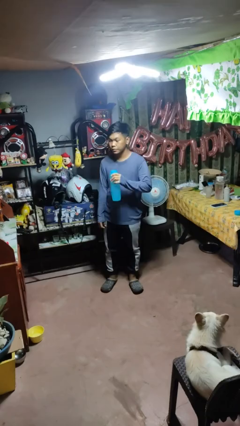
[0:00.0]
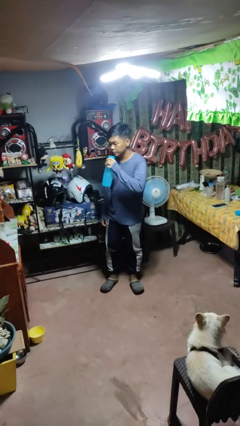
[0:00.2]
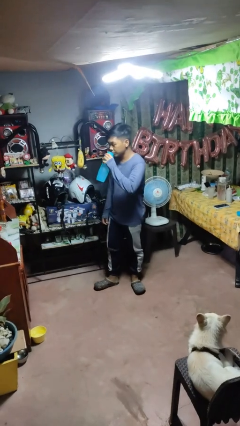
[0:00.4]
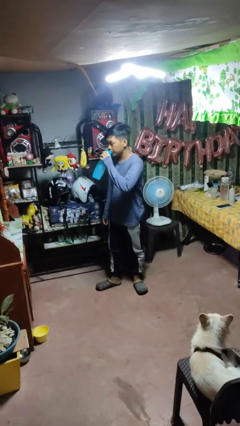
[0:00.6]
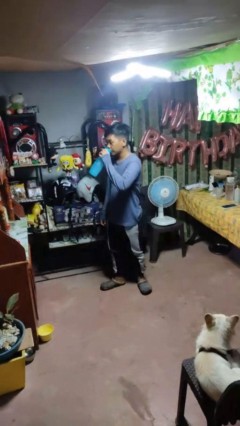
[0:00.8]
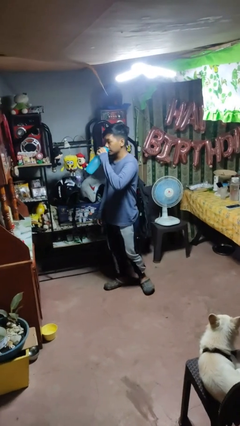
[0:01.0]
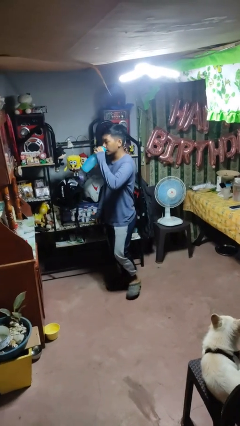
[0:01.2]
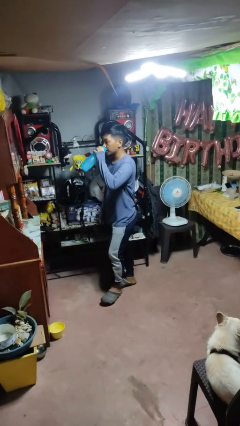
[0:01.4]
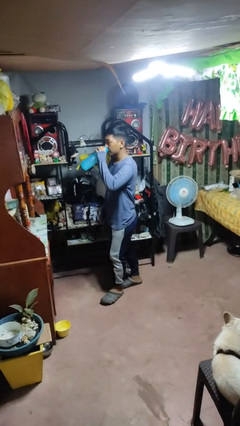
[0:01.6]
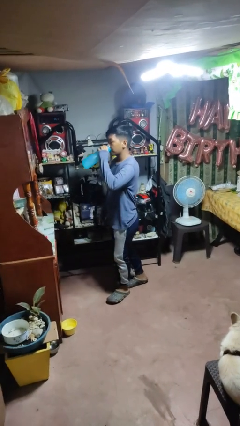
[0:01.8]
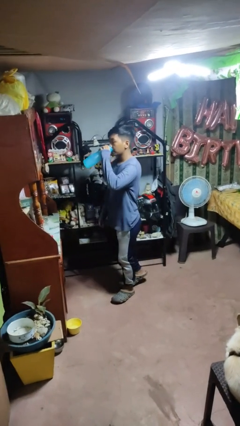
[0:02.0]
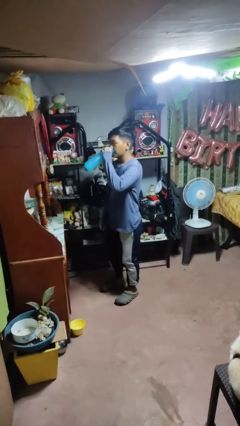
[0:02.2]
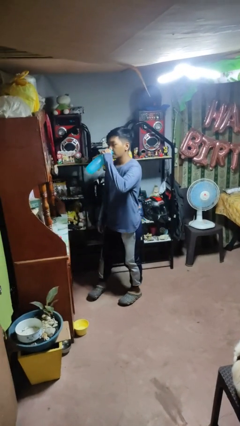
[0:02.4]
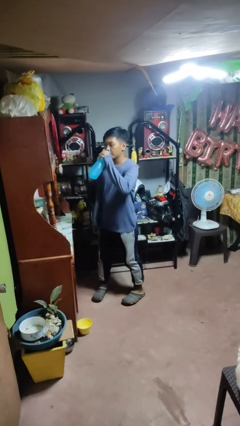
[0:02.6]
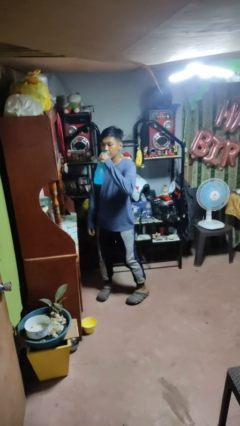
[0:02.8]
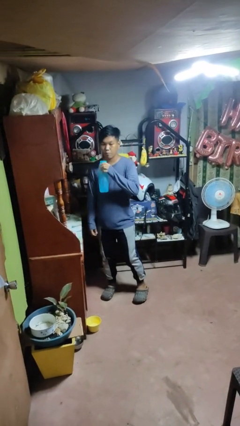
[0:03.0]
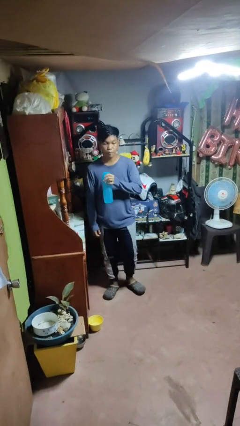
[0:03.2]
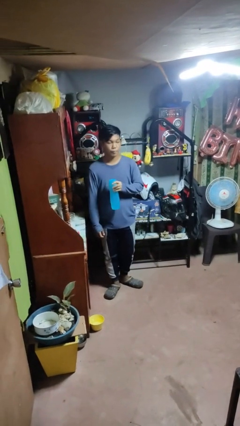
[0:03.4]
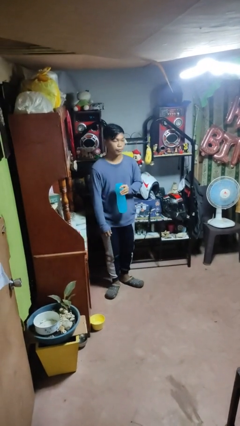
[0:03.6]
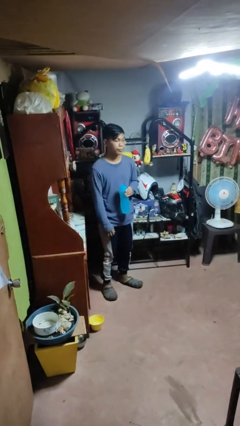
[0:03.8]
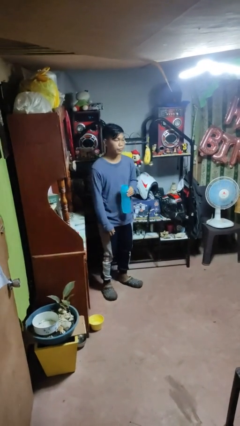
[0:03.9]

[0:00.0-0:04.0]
person drinks from bottle

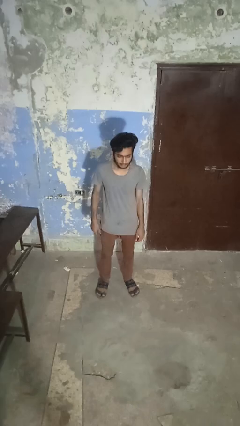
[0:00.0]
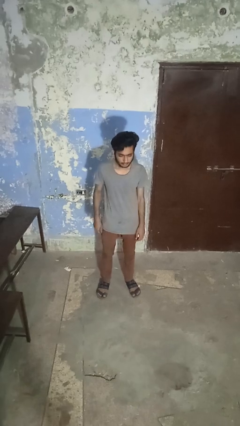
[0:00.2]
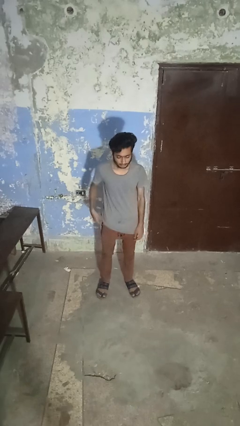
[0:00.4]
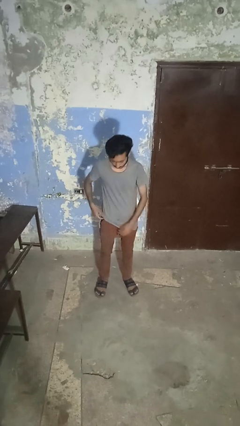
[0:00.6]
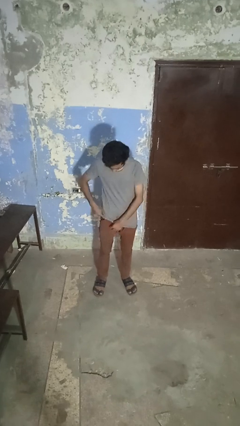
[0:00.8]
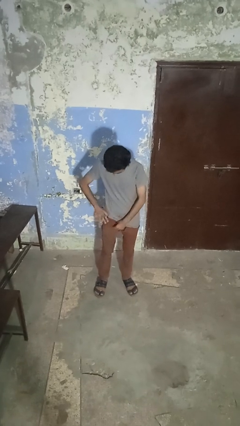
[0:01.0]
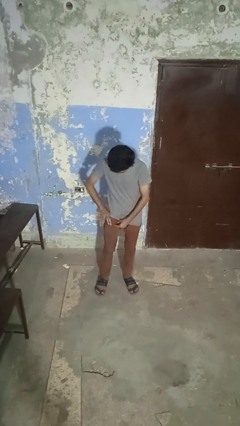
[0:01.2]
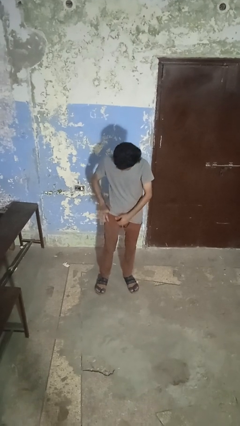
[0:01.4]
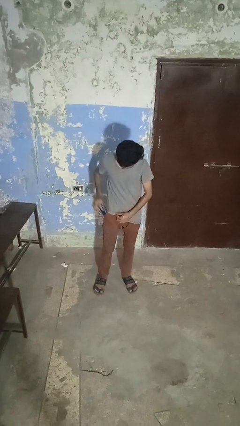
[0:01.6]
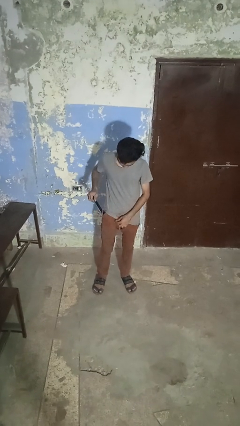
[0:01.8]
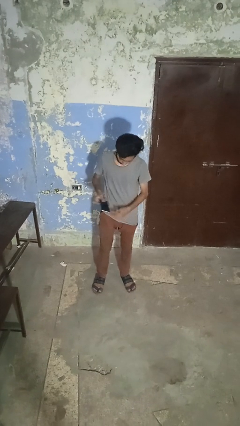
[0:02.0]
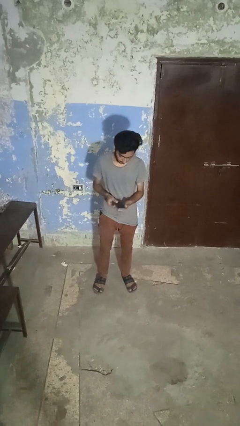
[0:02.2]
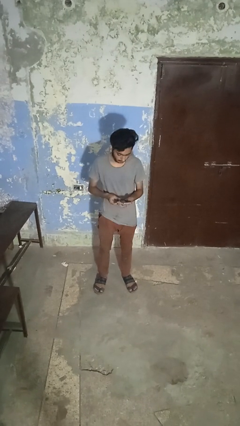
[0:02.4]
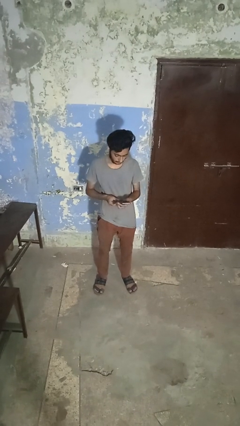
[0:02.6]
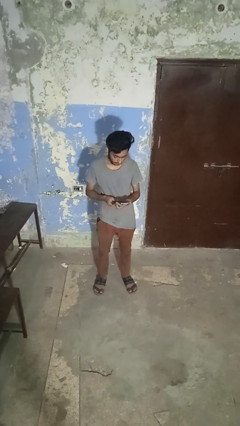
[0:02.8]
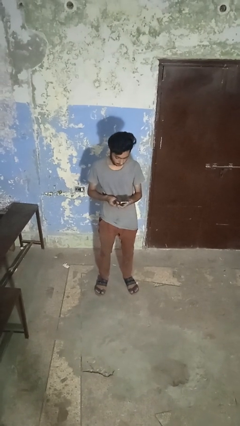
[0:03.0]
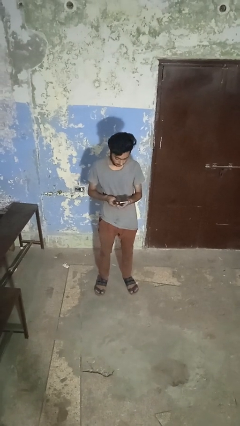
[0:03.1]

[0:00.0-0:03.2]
person takes phone from pocket

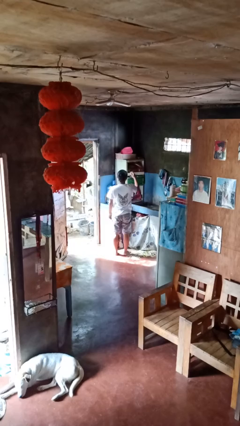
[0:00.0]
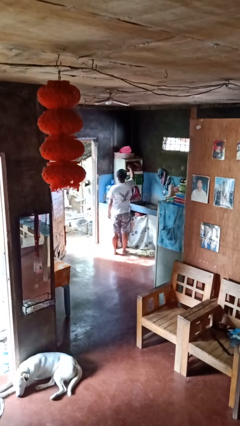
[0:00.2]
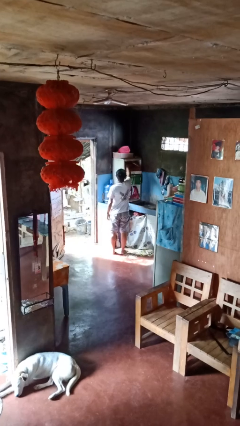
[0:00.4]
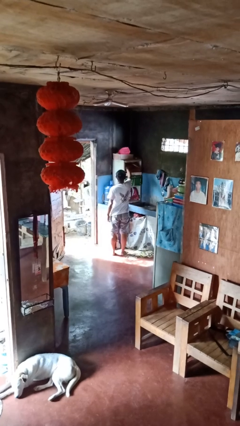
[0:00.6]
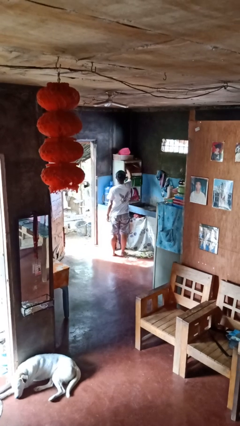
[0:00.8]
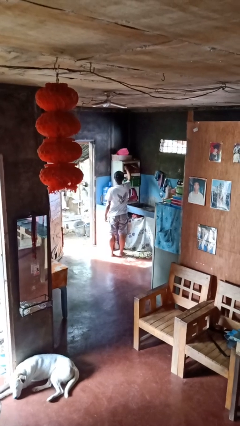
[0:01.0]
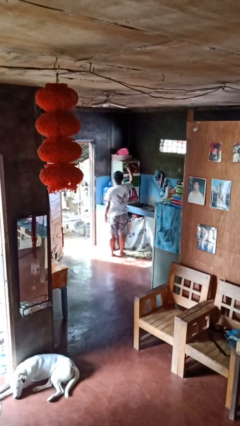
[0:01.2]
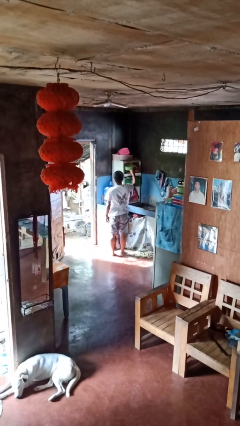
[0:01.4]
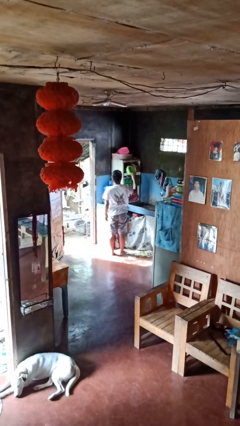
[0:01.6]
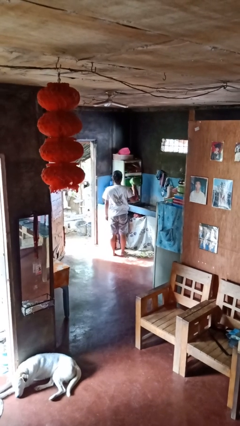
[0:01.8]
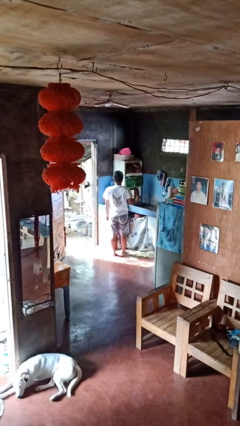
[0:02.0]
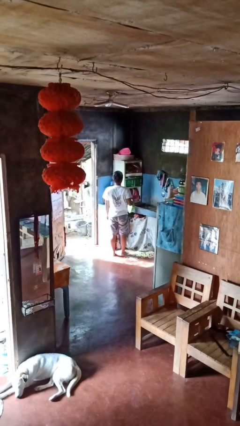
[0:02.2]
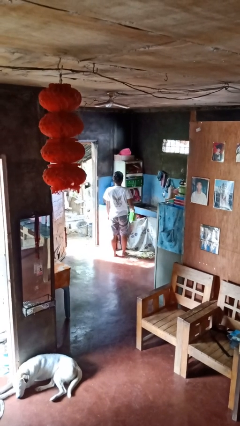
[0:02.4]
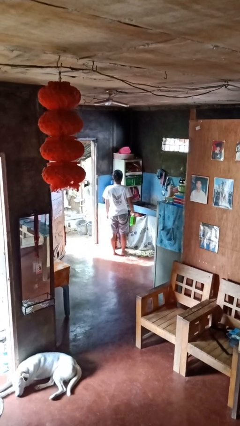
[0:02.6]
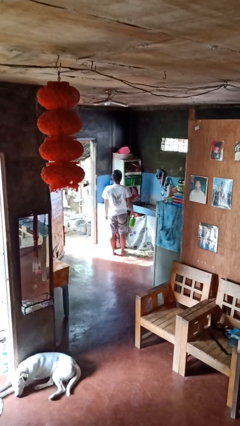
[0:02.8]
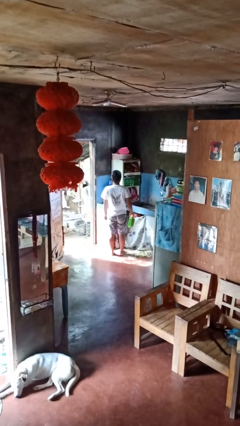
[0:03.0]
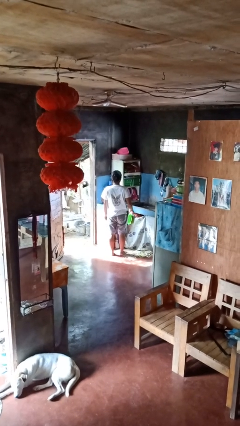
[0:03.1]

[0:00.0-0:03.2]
person takes object from cabinet

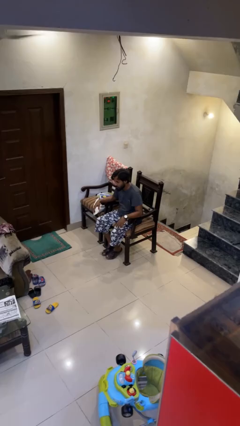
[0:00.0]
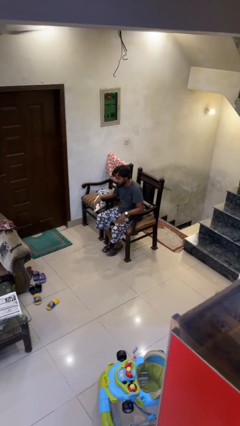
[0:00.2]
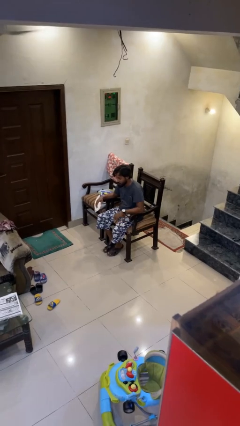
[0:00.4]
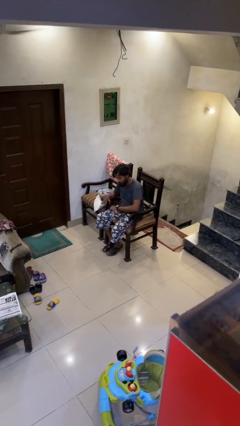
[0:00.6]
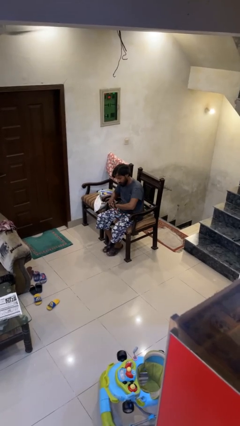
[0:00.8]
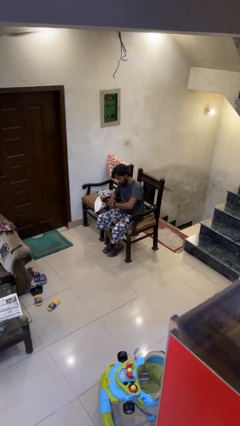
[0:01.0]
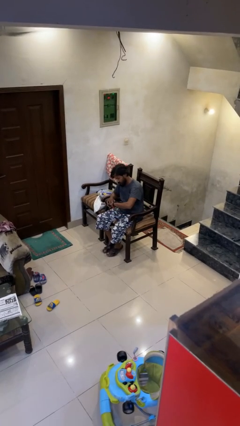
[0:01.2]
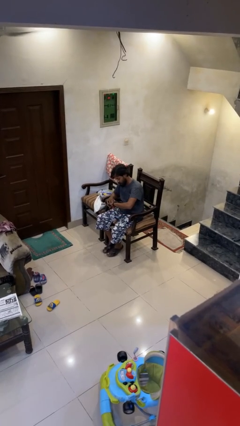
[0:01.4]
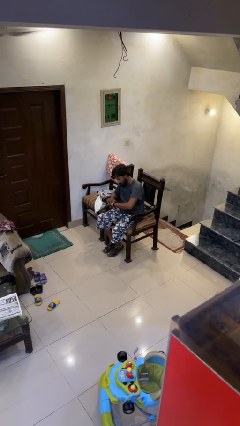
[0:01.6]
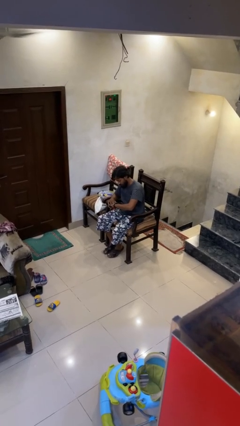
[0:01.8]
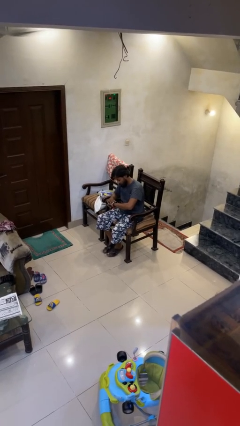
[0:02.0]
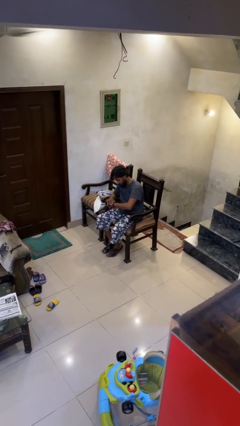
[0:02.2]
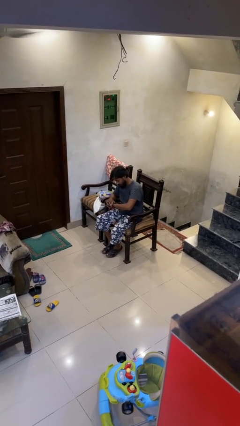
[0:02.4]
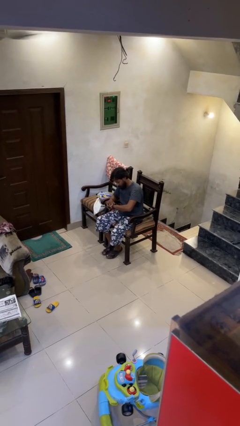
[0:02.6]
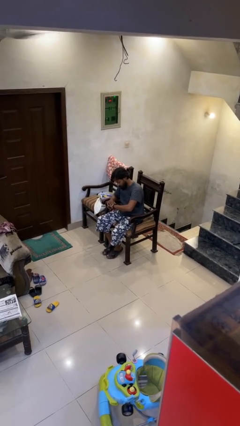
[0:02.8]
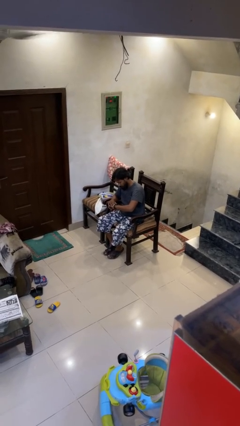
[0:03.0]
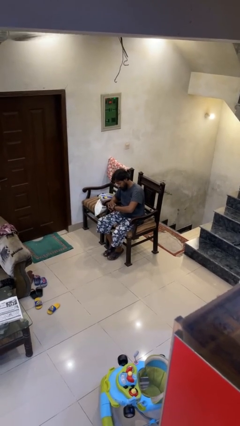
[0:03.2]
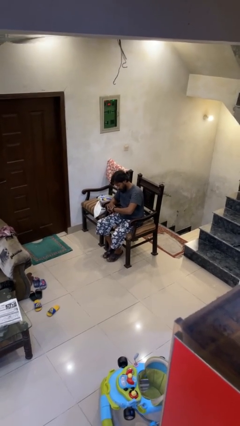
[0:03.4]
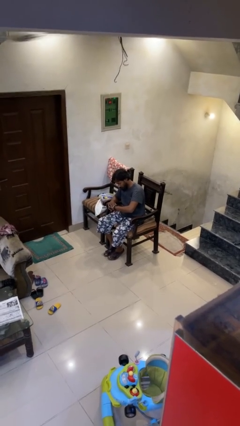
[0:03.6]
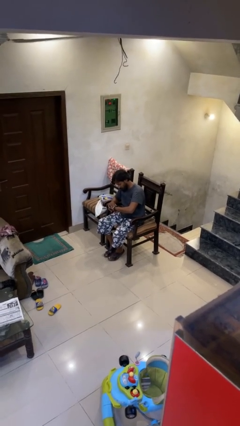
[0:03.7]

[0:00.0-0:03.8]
person looks at wristwatch

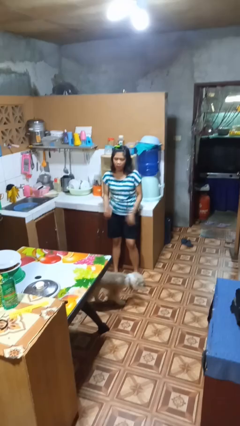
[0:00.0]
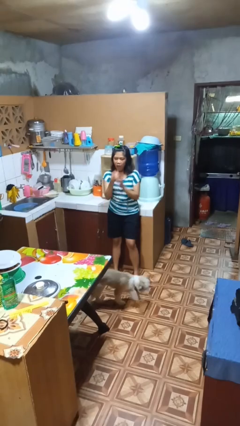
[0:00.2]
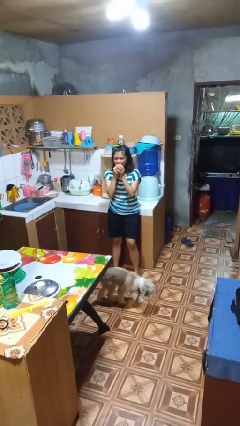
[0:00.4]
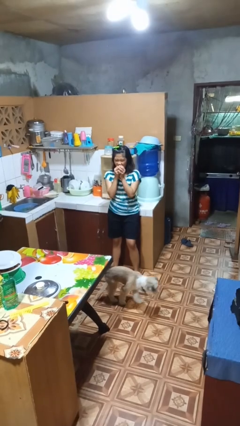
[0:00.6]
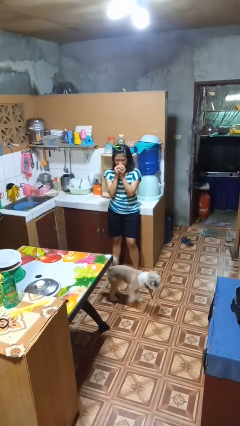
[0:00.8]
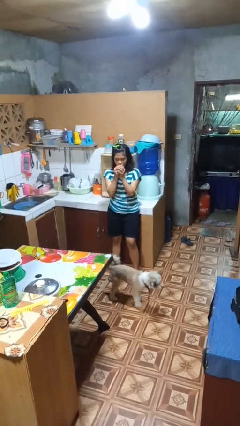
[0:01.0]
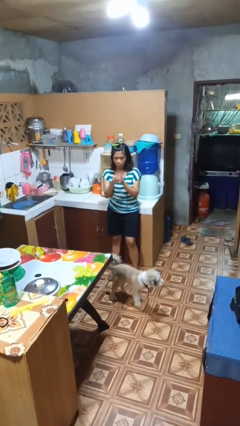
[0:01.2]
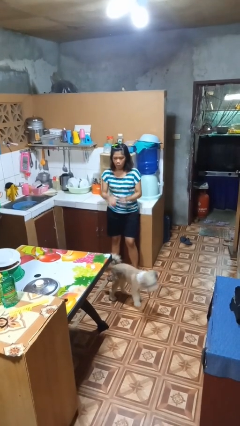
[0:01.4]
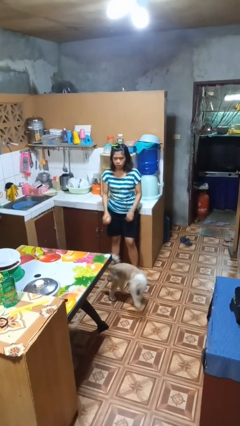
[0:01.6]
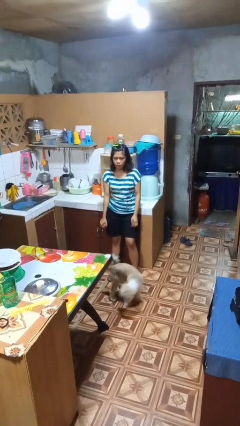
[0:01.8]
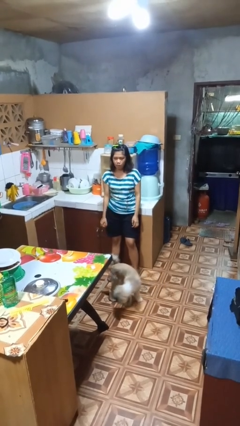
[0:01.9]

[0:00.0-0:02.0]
person eats apple

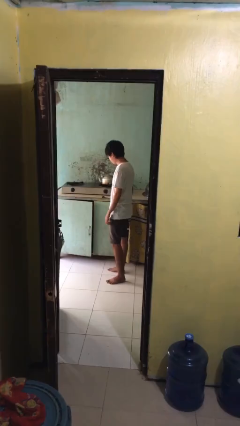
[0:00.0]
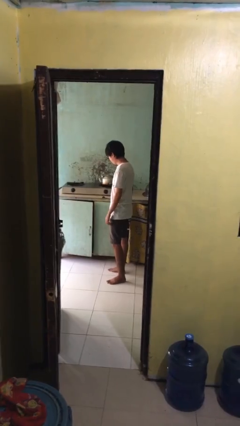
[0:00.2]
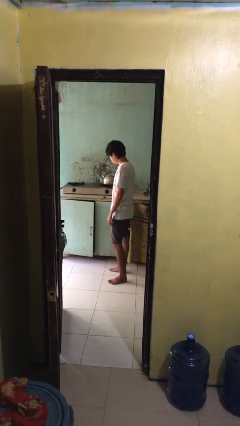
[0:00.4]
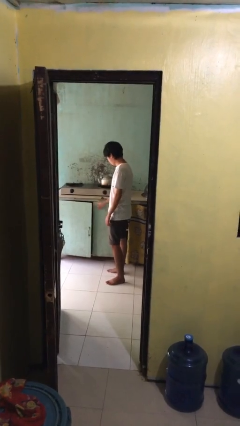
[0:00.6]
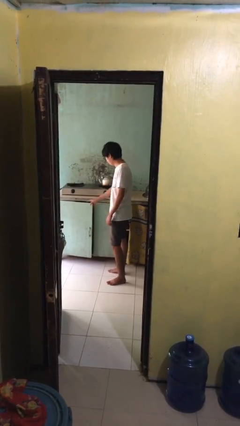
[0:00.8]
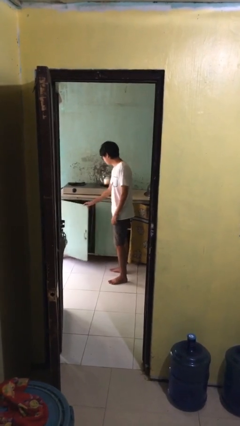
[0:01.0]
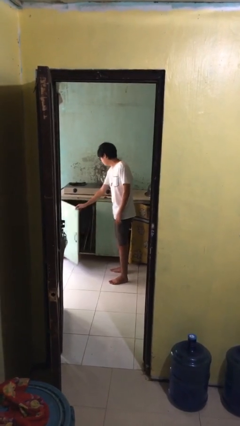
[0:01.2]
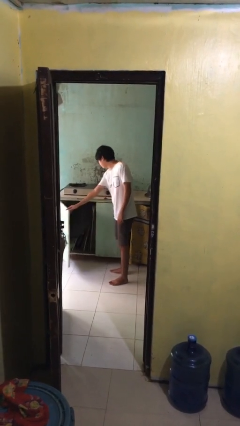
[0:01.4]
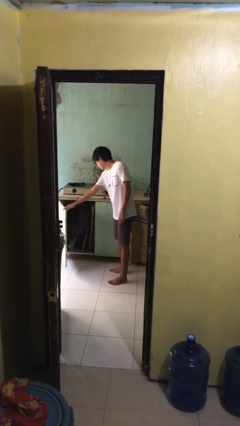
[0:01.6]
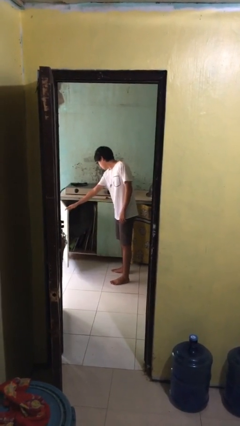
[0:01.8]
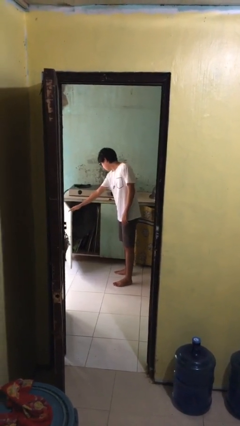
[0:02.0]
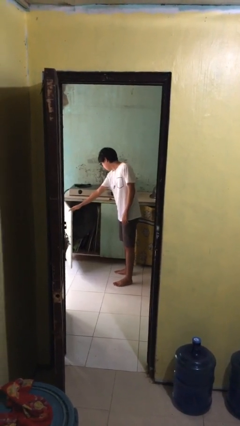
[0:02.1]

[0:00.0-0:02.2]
person opens cabinet
